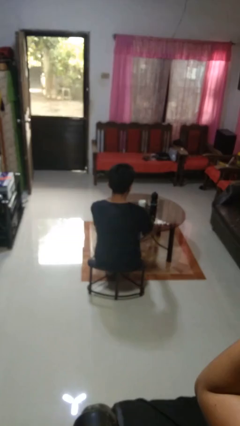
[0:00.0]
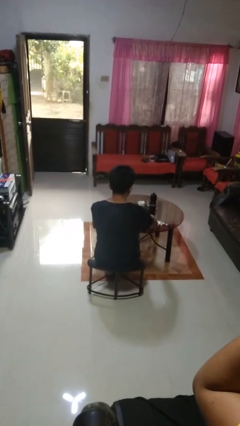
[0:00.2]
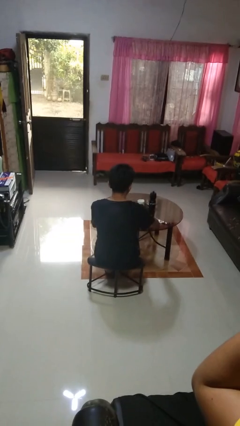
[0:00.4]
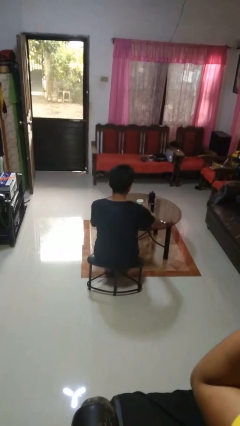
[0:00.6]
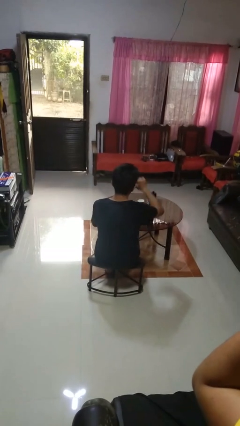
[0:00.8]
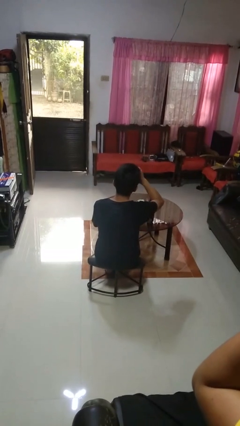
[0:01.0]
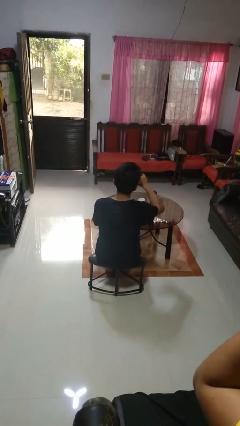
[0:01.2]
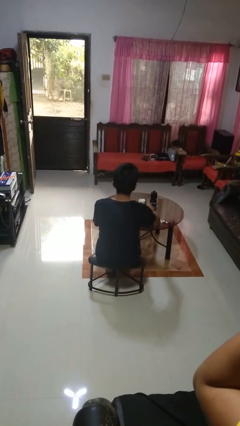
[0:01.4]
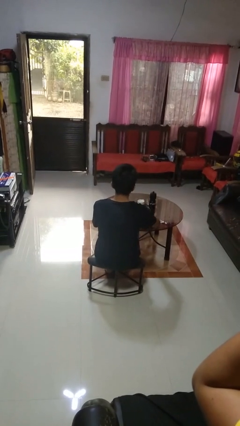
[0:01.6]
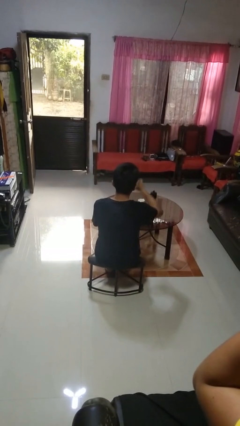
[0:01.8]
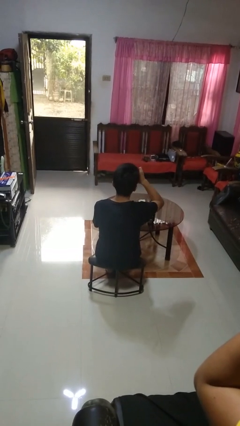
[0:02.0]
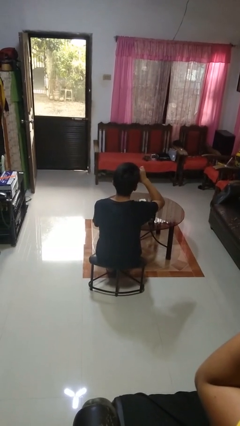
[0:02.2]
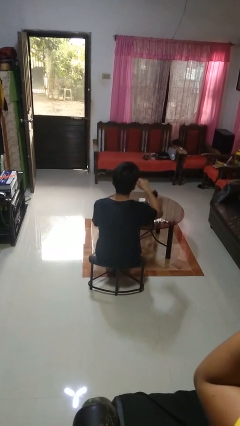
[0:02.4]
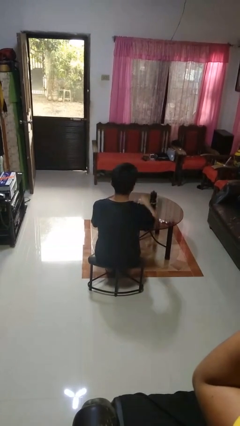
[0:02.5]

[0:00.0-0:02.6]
person eats with utensil

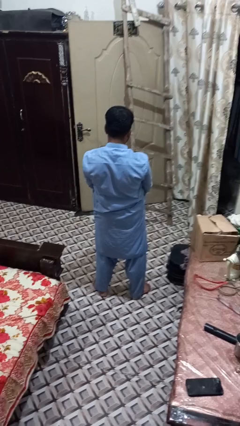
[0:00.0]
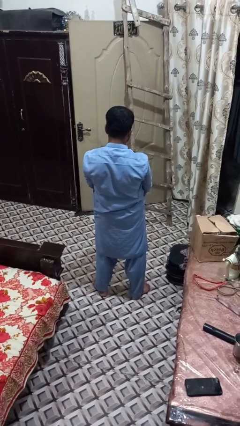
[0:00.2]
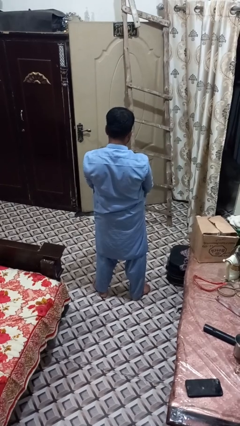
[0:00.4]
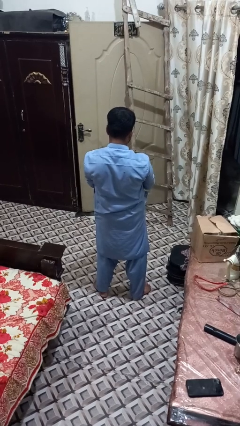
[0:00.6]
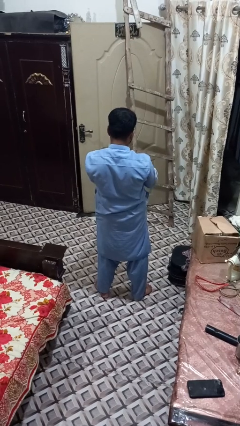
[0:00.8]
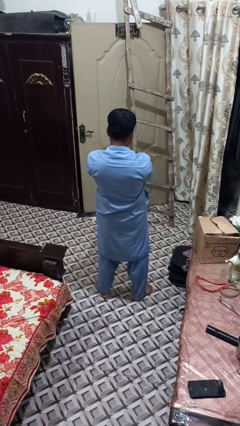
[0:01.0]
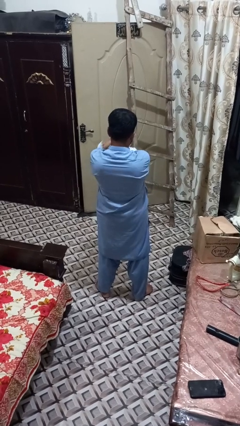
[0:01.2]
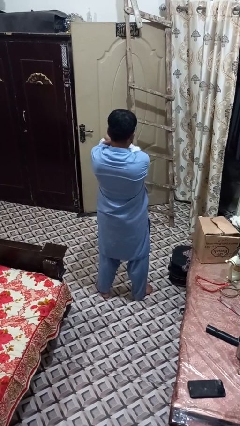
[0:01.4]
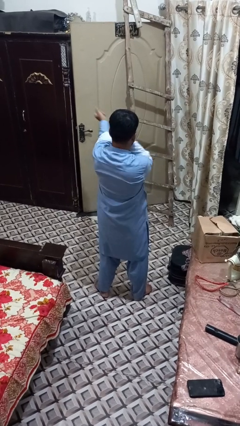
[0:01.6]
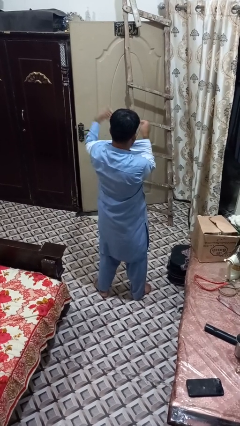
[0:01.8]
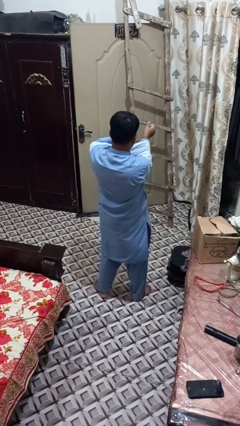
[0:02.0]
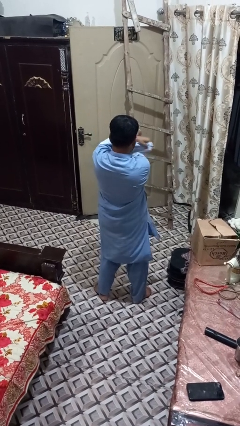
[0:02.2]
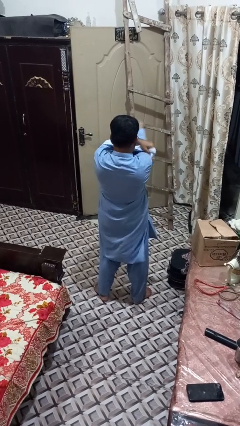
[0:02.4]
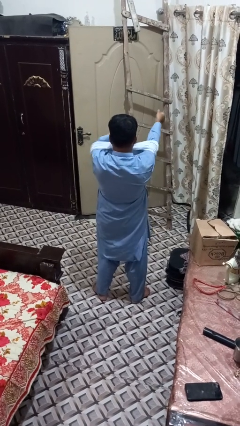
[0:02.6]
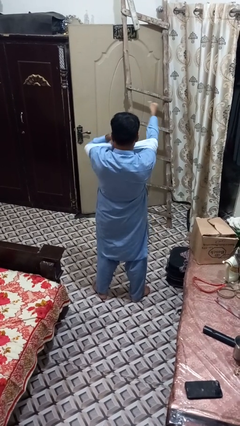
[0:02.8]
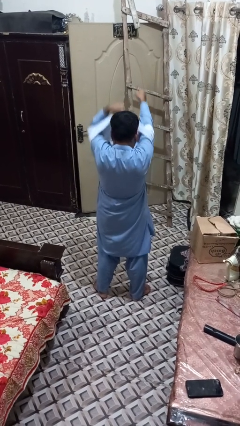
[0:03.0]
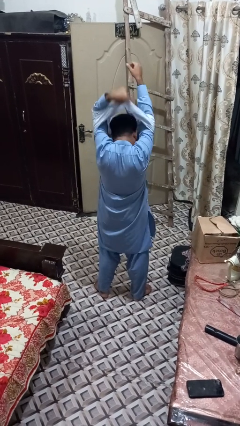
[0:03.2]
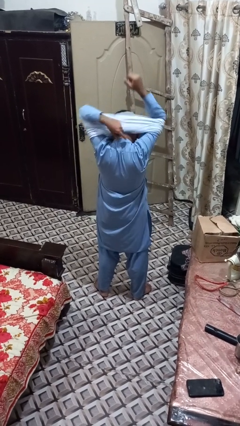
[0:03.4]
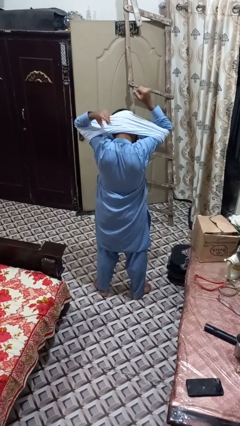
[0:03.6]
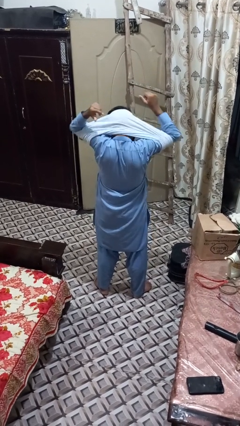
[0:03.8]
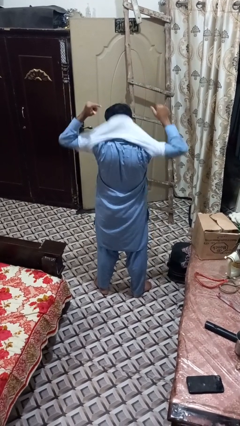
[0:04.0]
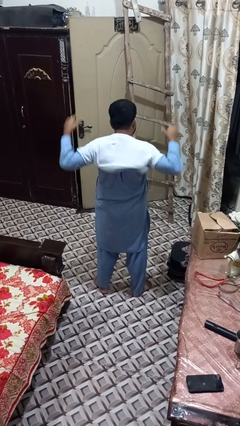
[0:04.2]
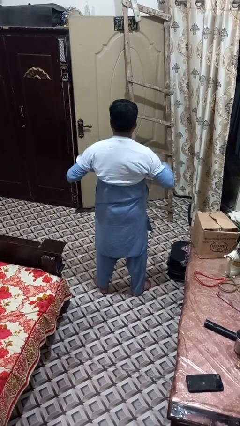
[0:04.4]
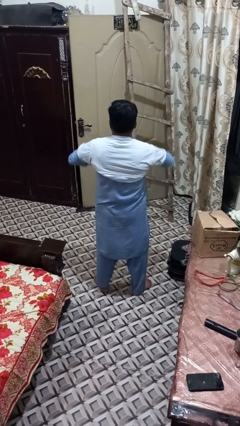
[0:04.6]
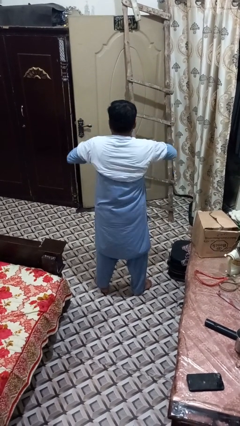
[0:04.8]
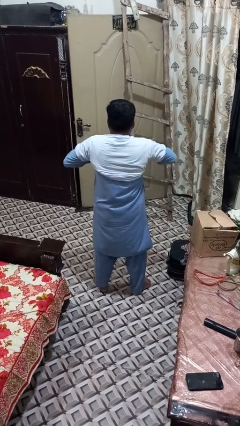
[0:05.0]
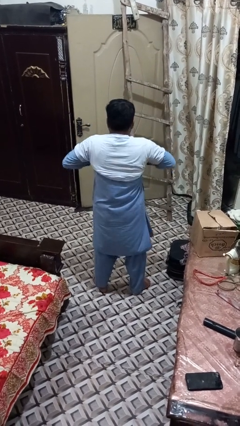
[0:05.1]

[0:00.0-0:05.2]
person puts on shirt

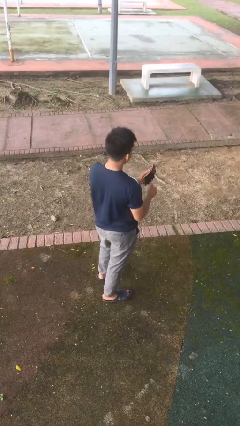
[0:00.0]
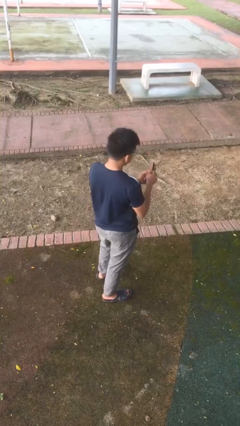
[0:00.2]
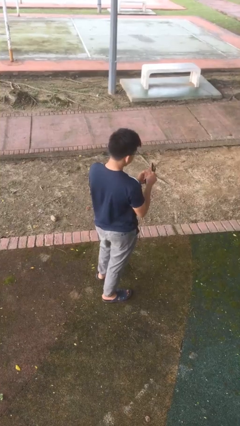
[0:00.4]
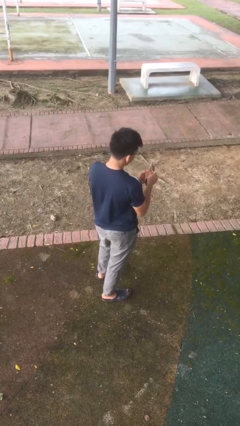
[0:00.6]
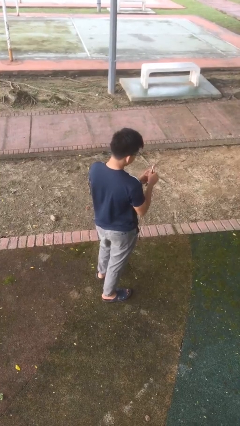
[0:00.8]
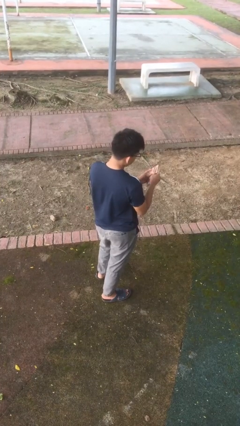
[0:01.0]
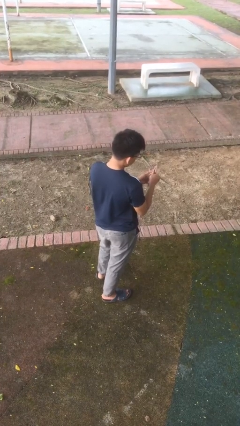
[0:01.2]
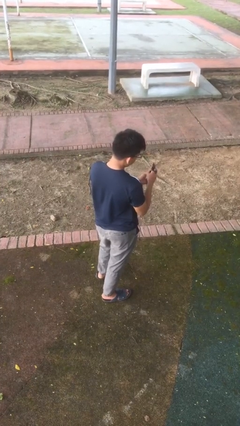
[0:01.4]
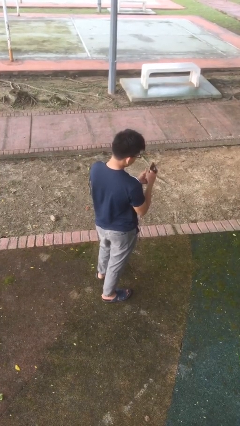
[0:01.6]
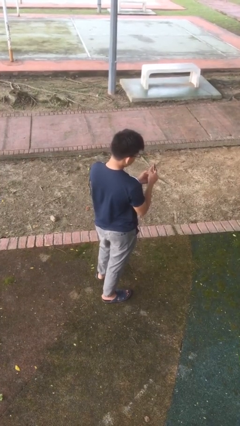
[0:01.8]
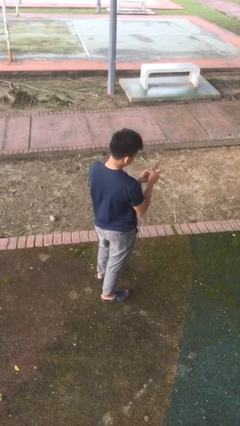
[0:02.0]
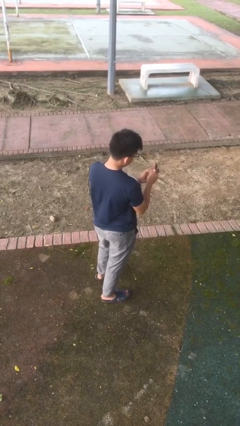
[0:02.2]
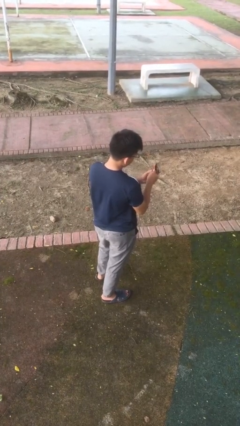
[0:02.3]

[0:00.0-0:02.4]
person searches in purse

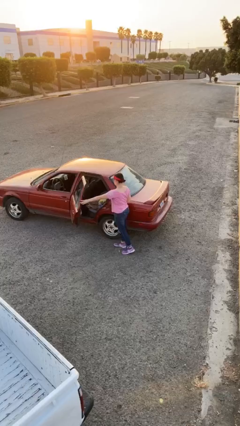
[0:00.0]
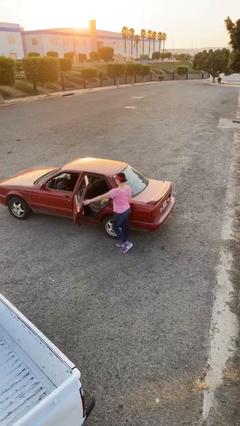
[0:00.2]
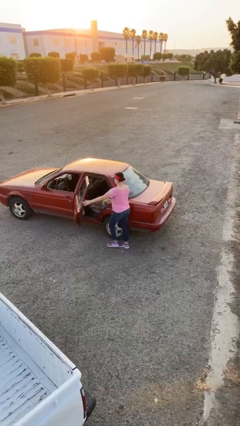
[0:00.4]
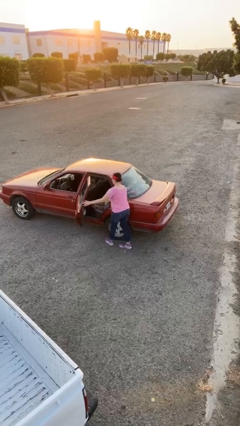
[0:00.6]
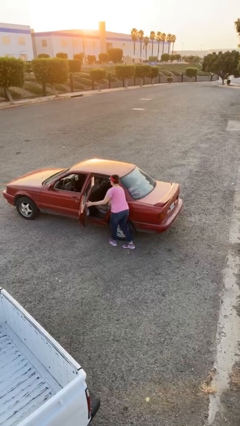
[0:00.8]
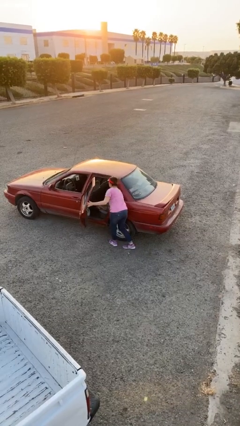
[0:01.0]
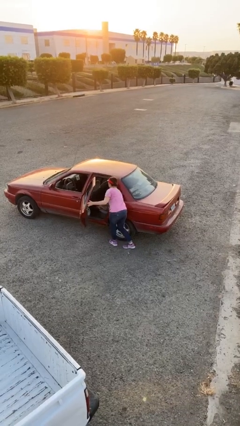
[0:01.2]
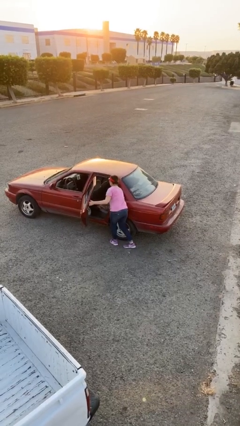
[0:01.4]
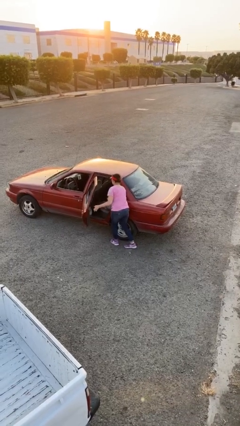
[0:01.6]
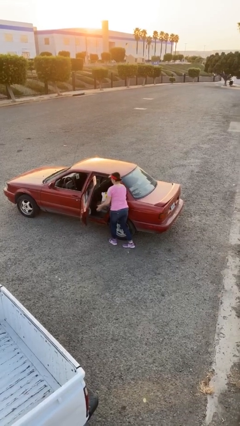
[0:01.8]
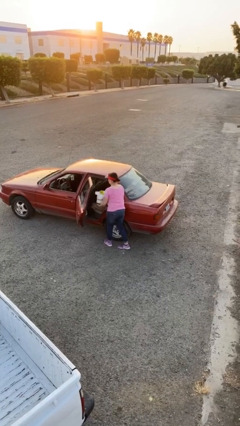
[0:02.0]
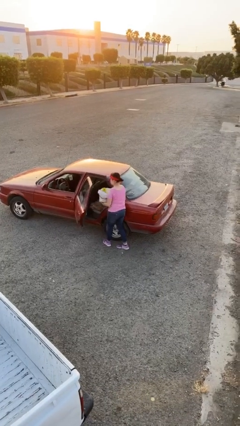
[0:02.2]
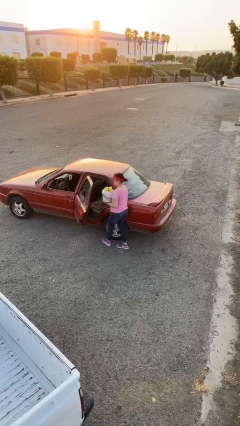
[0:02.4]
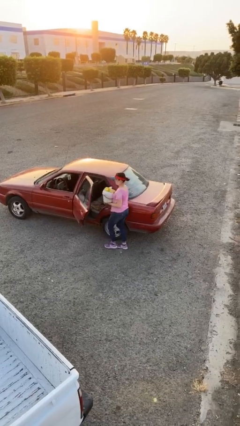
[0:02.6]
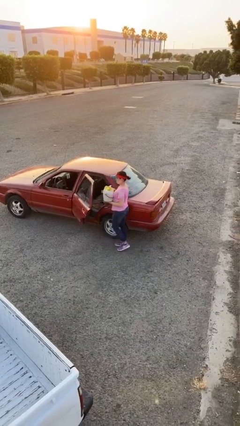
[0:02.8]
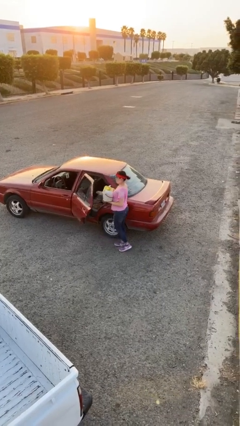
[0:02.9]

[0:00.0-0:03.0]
person unloads car

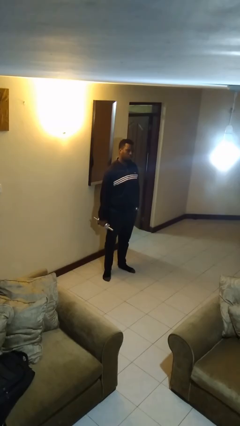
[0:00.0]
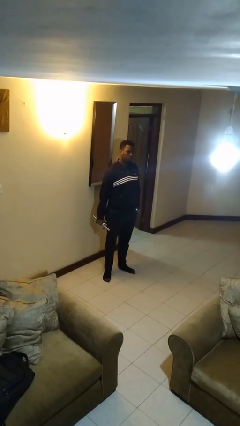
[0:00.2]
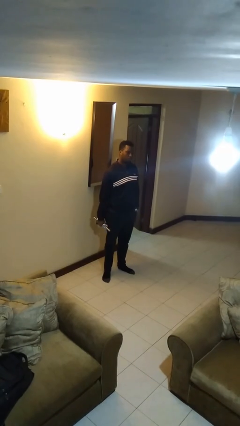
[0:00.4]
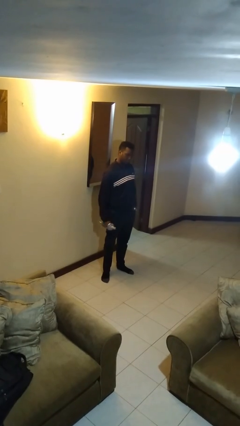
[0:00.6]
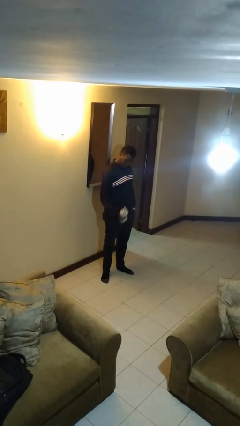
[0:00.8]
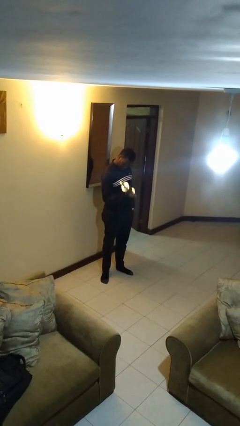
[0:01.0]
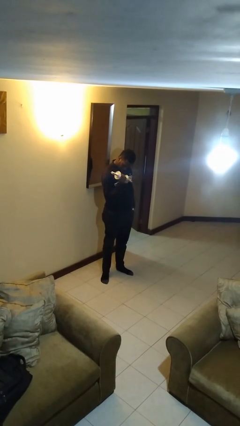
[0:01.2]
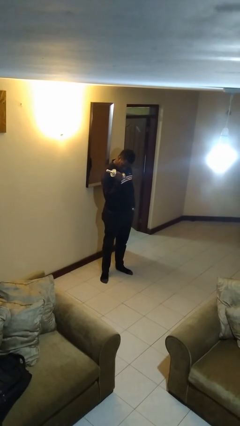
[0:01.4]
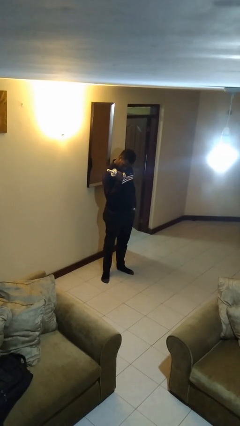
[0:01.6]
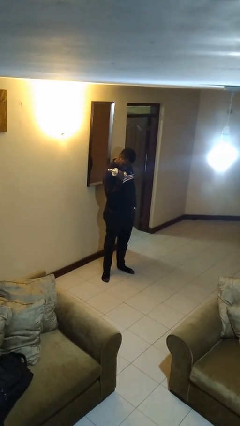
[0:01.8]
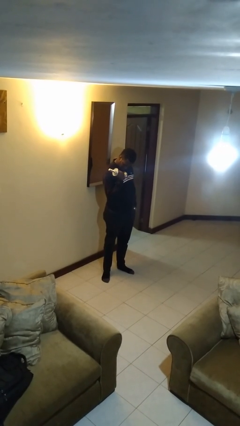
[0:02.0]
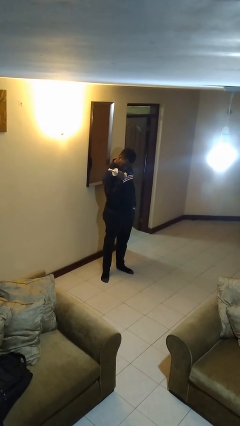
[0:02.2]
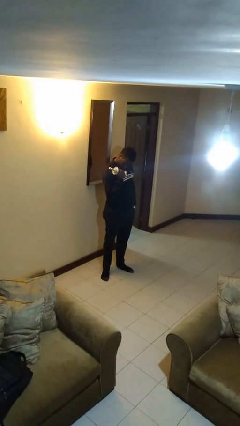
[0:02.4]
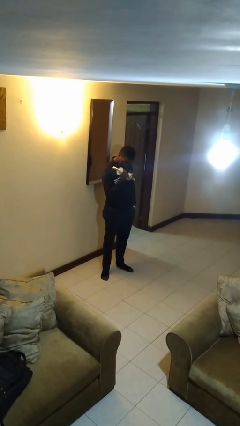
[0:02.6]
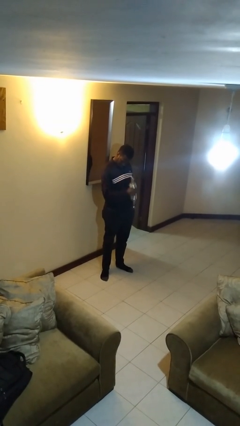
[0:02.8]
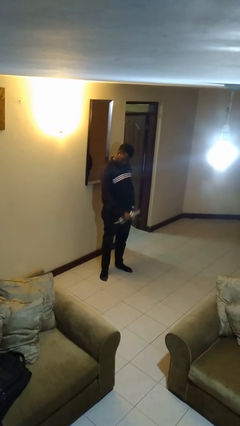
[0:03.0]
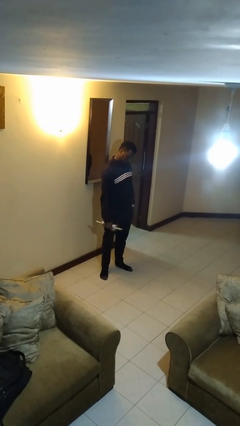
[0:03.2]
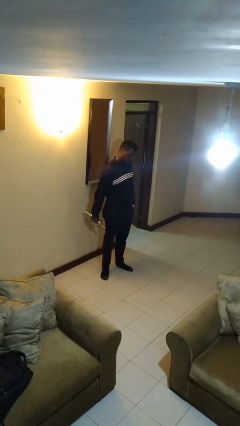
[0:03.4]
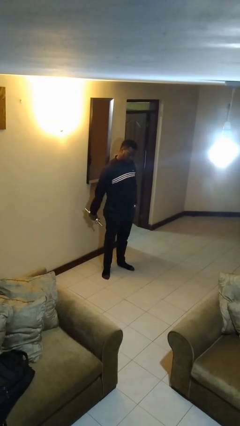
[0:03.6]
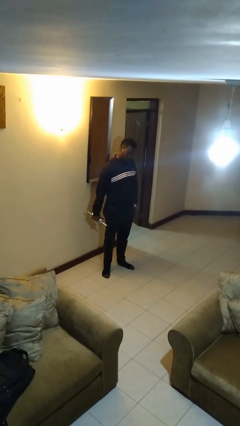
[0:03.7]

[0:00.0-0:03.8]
person lifts dumbbells

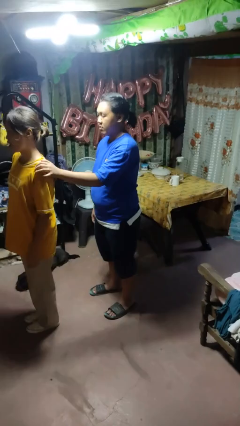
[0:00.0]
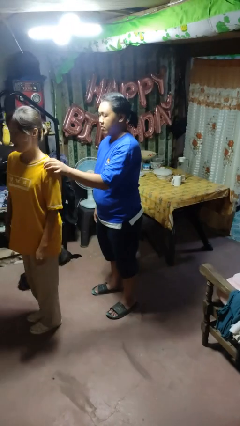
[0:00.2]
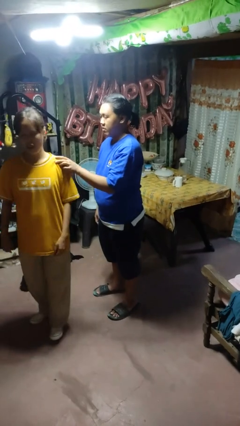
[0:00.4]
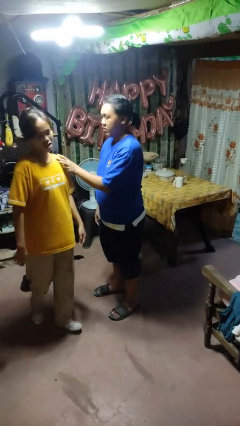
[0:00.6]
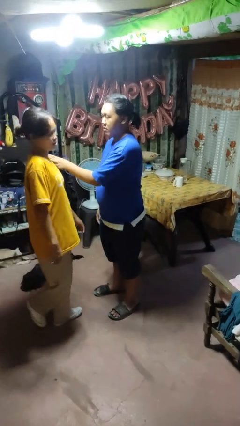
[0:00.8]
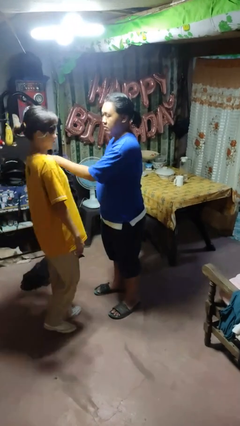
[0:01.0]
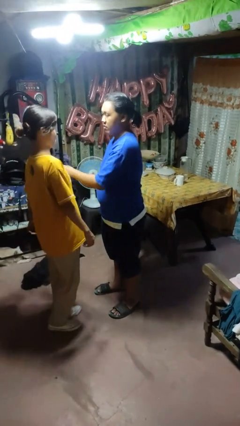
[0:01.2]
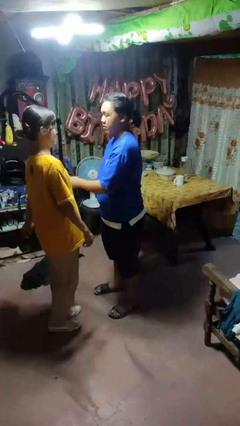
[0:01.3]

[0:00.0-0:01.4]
person spins person around
